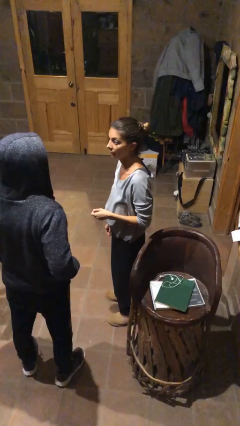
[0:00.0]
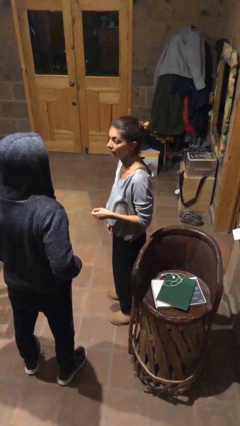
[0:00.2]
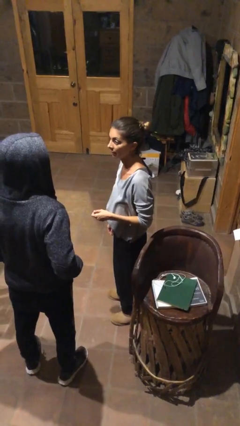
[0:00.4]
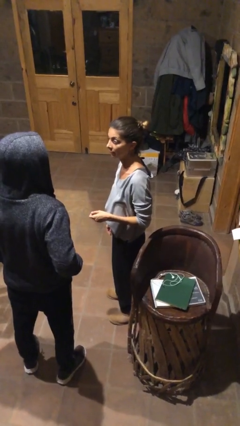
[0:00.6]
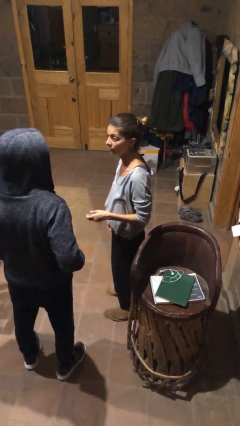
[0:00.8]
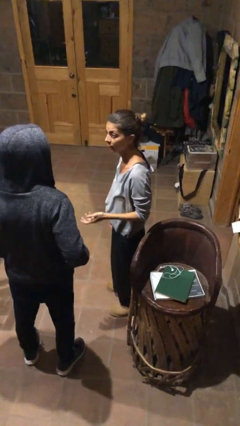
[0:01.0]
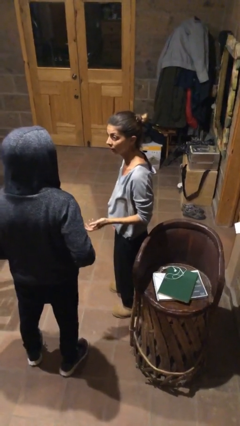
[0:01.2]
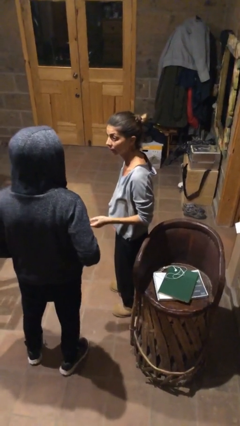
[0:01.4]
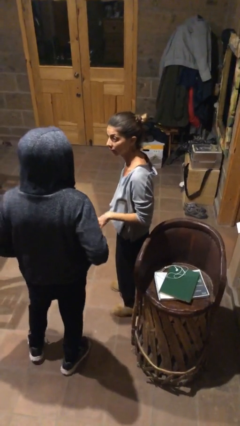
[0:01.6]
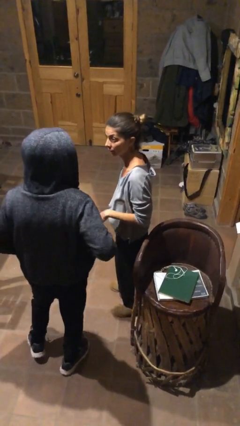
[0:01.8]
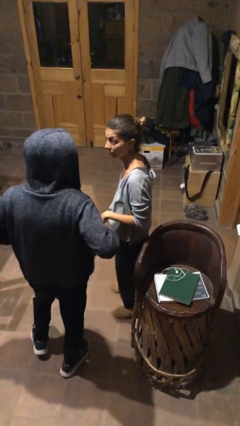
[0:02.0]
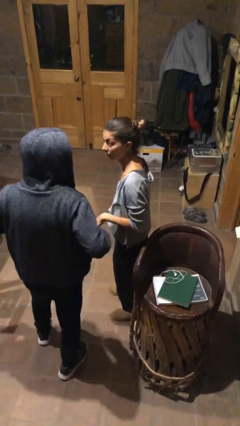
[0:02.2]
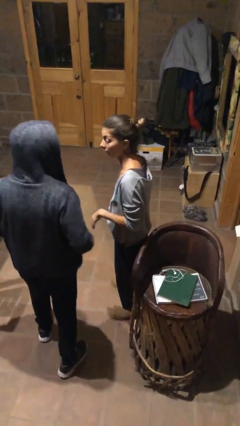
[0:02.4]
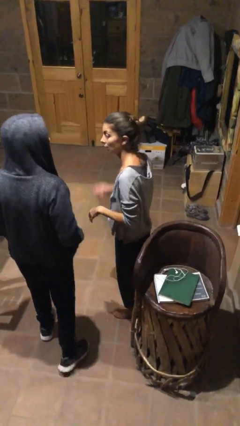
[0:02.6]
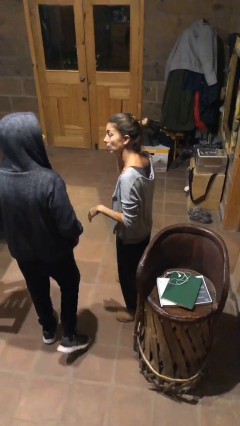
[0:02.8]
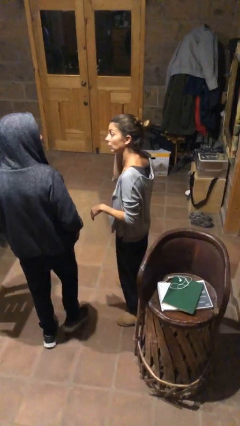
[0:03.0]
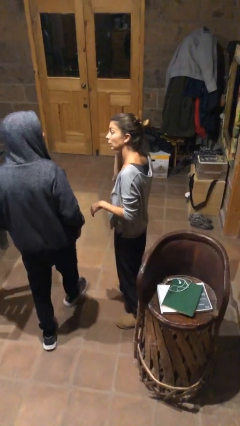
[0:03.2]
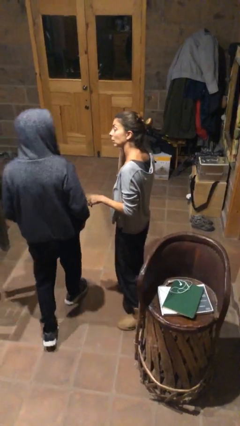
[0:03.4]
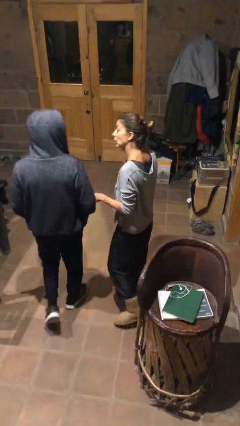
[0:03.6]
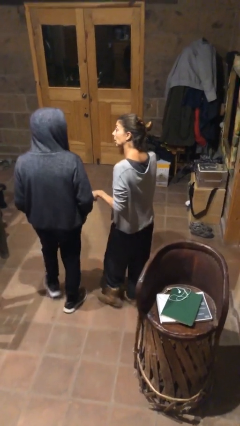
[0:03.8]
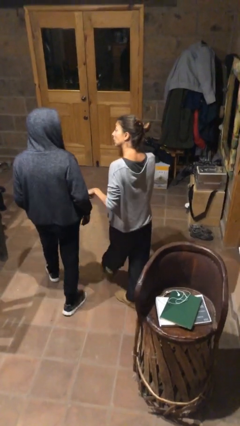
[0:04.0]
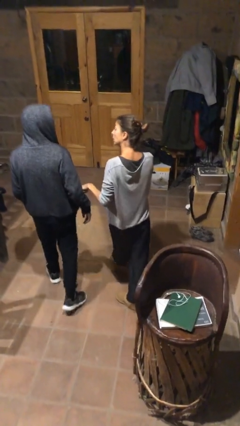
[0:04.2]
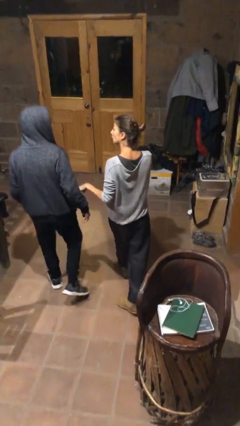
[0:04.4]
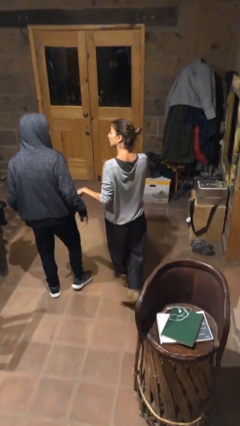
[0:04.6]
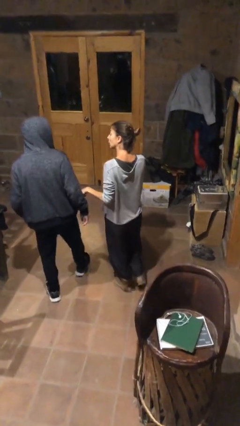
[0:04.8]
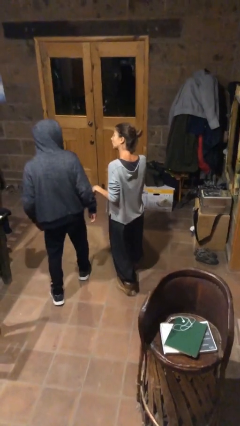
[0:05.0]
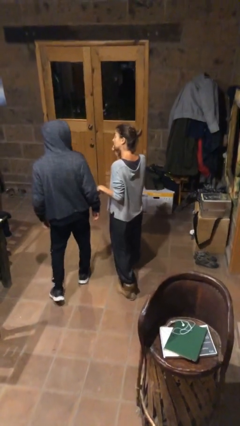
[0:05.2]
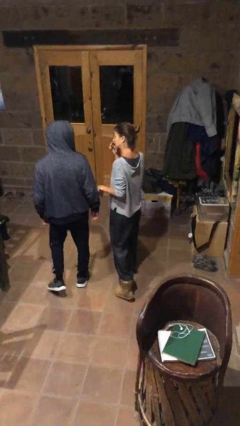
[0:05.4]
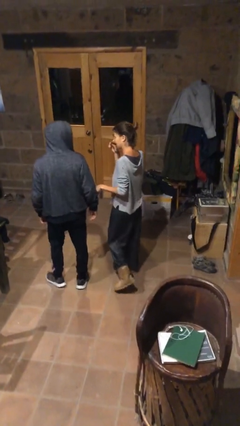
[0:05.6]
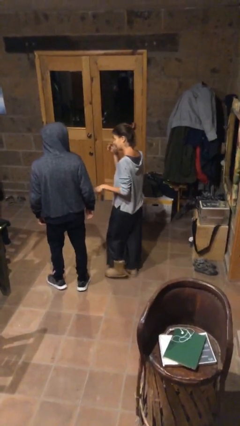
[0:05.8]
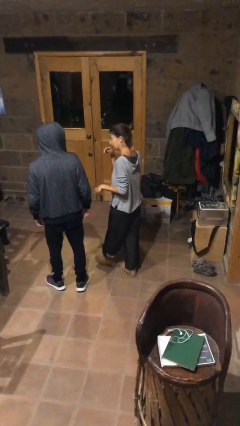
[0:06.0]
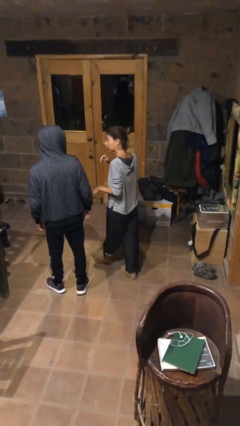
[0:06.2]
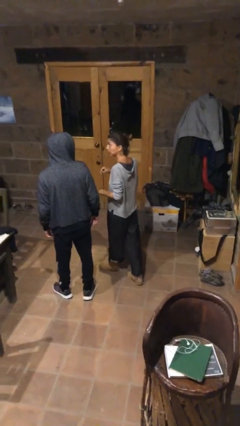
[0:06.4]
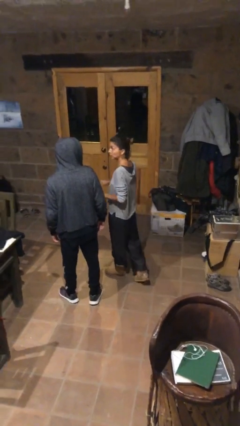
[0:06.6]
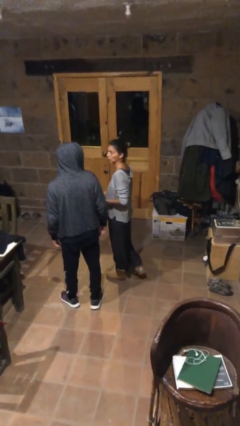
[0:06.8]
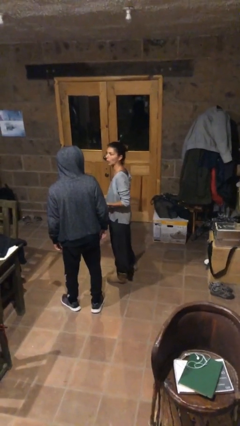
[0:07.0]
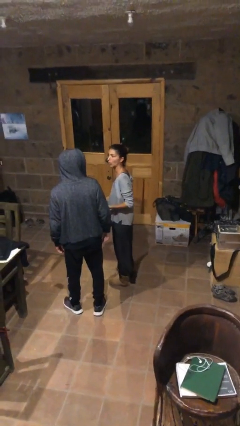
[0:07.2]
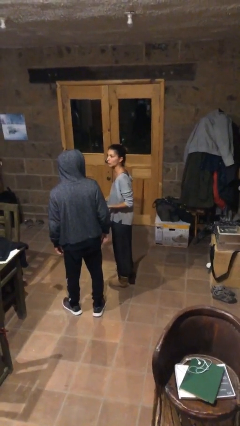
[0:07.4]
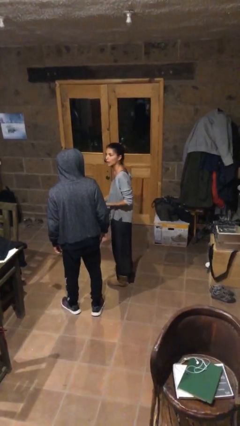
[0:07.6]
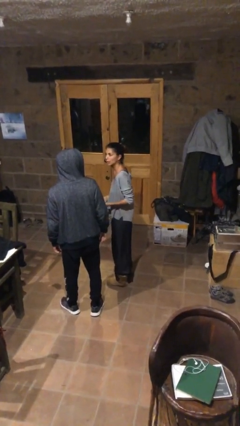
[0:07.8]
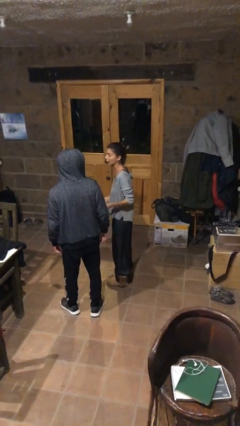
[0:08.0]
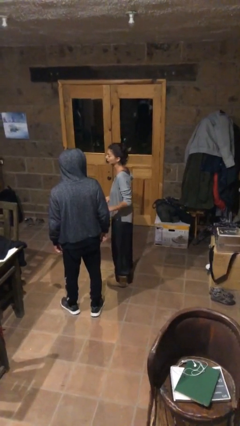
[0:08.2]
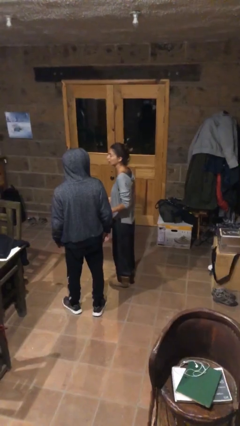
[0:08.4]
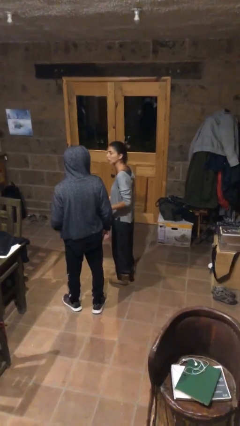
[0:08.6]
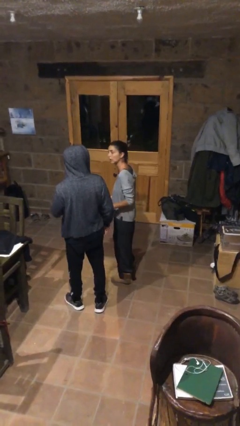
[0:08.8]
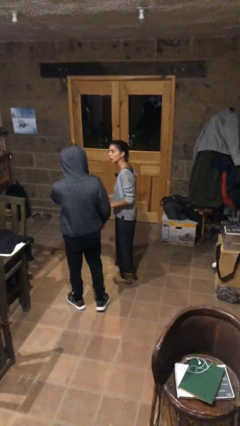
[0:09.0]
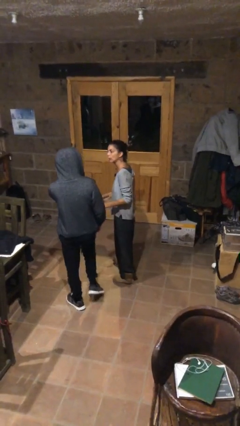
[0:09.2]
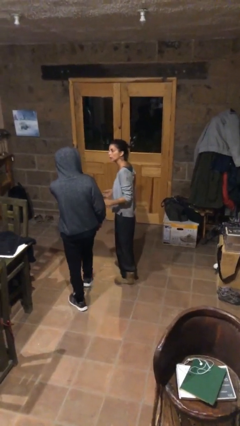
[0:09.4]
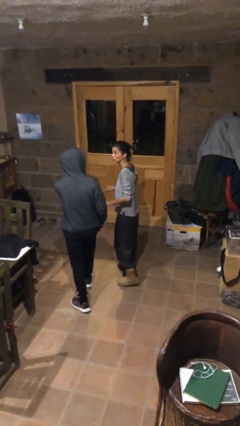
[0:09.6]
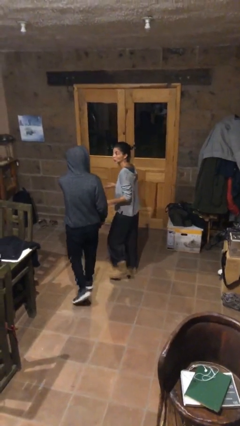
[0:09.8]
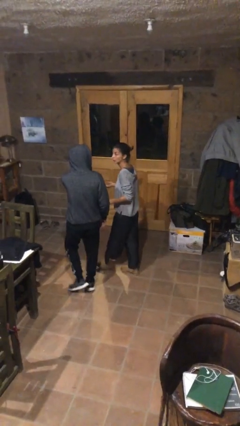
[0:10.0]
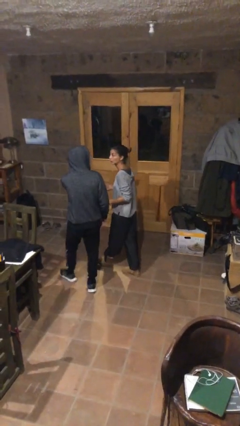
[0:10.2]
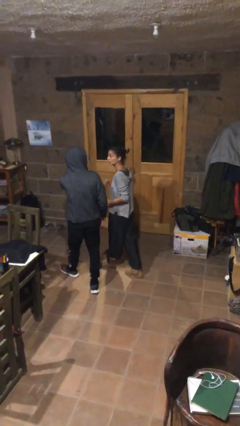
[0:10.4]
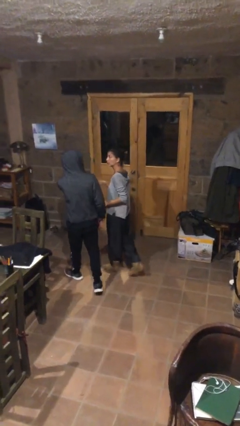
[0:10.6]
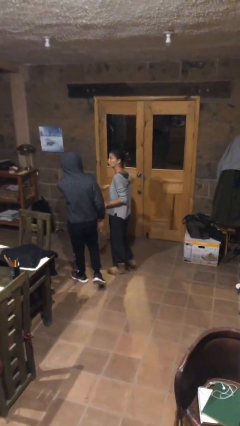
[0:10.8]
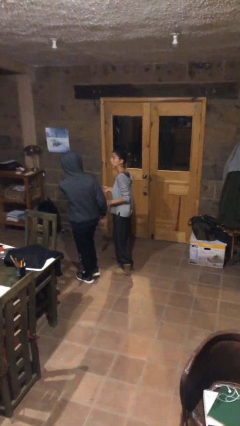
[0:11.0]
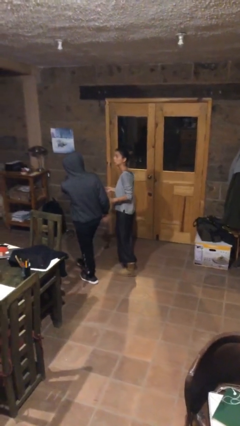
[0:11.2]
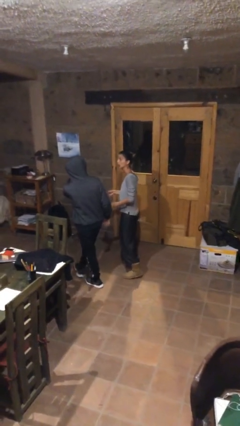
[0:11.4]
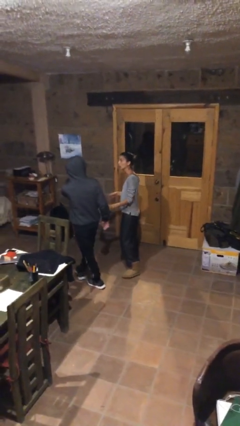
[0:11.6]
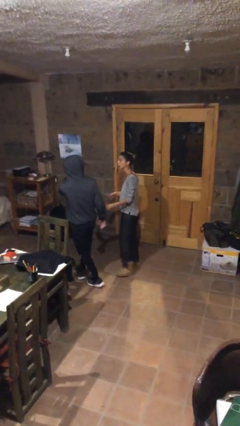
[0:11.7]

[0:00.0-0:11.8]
person talks to person

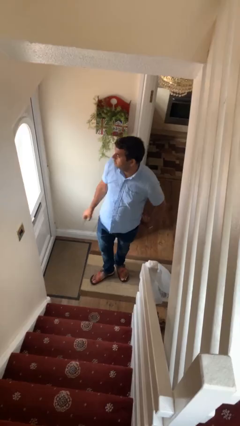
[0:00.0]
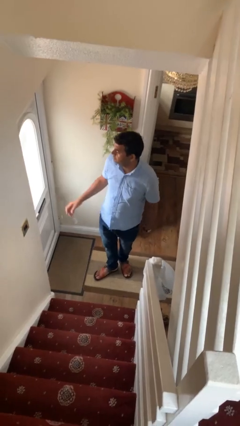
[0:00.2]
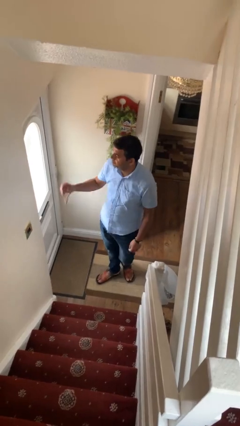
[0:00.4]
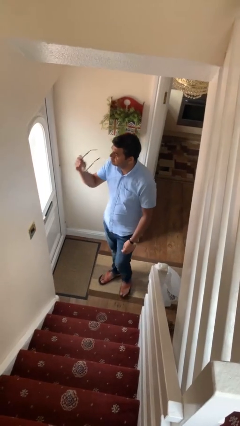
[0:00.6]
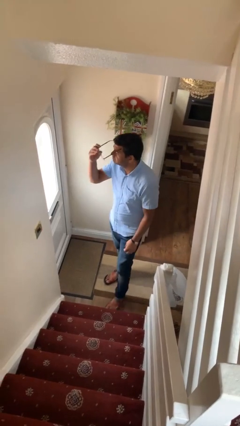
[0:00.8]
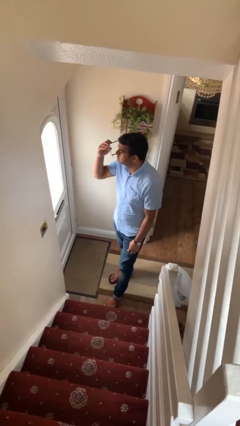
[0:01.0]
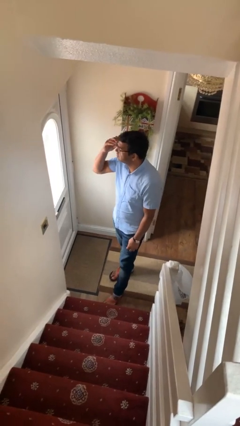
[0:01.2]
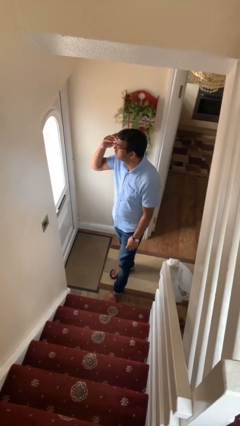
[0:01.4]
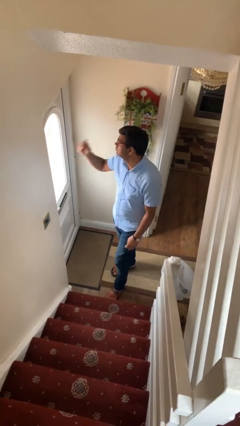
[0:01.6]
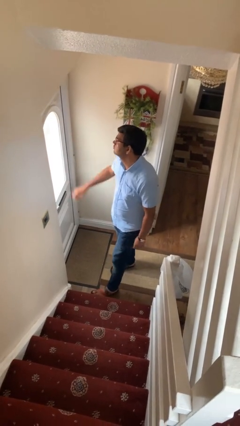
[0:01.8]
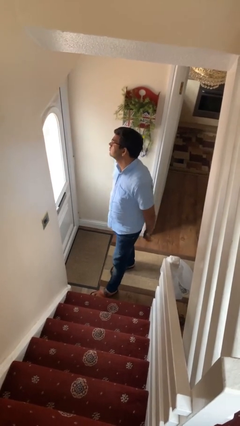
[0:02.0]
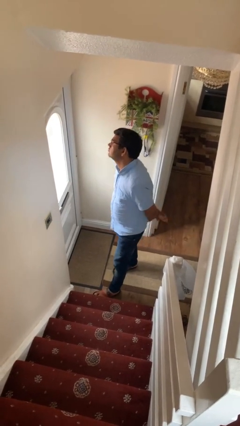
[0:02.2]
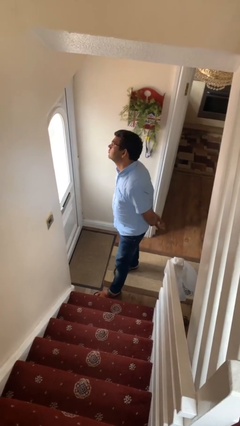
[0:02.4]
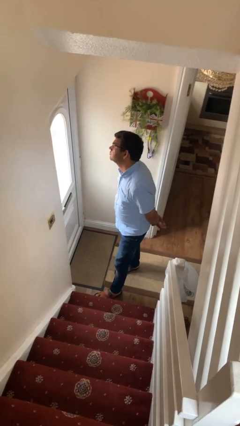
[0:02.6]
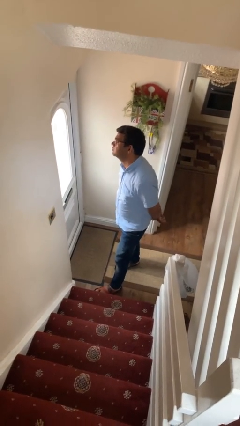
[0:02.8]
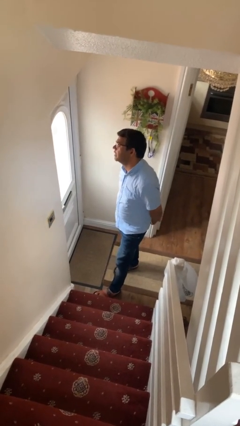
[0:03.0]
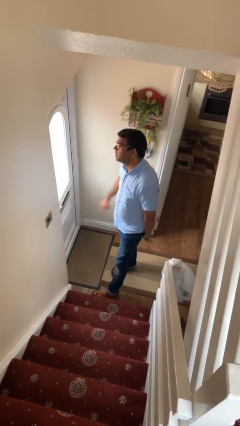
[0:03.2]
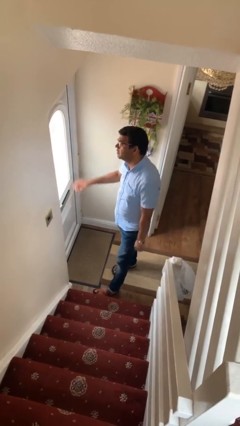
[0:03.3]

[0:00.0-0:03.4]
person puts on glasses

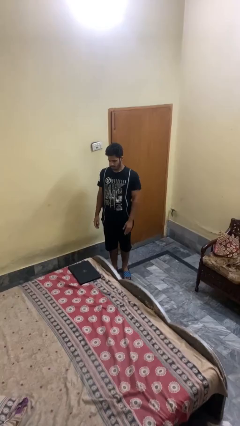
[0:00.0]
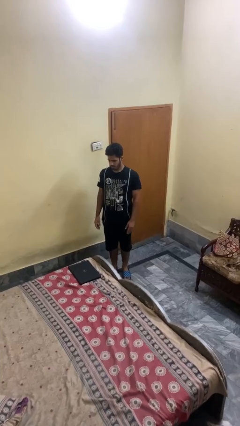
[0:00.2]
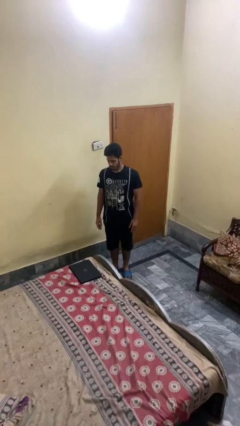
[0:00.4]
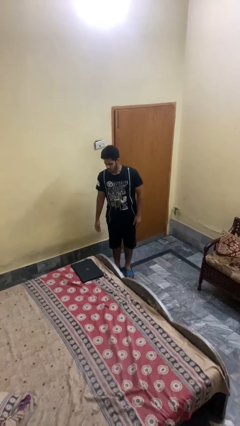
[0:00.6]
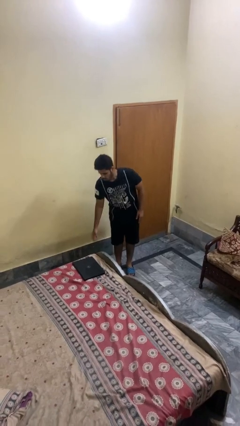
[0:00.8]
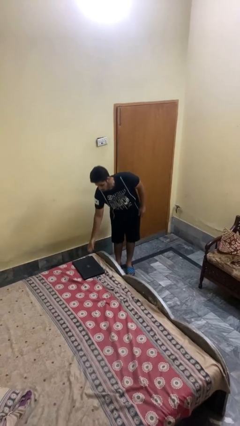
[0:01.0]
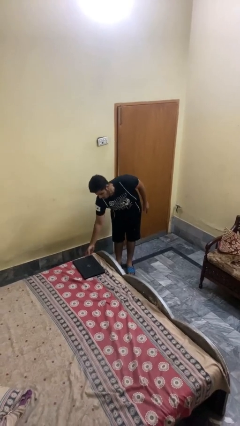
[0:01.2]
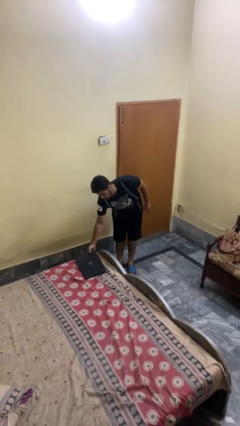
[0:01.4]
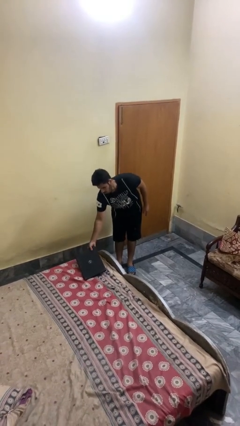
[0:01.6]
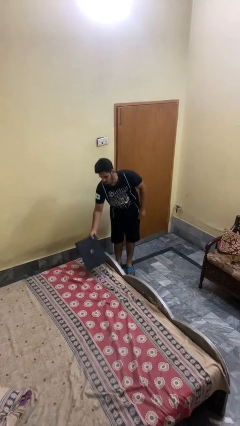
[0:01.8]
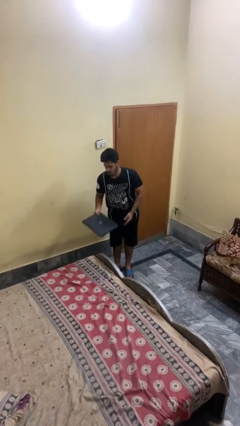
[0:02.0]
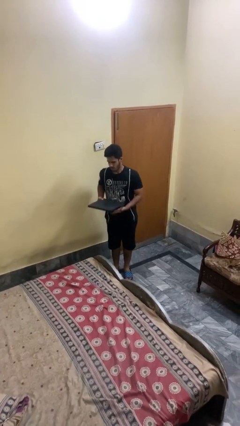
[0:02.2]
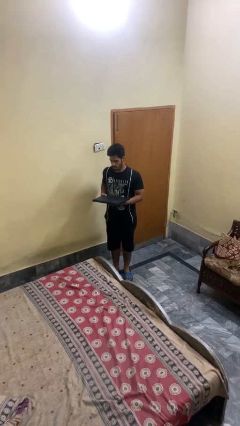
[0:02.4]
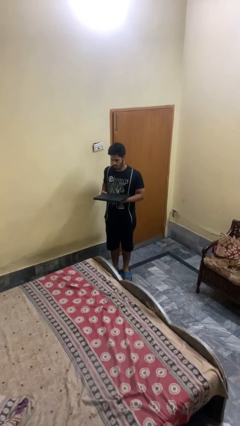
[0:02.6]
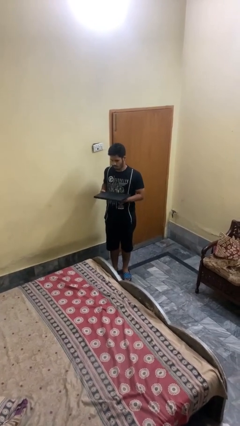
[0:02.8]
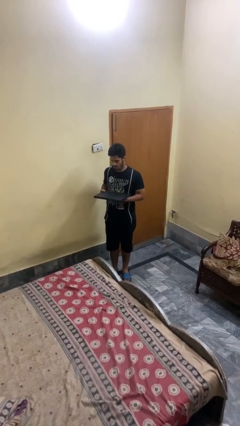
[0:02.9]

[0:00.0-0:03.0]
person picks up object from bed

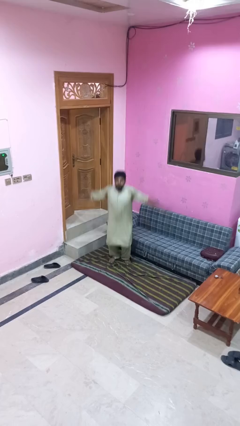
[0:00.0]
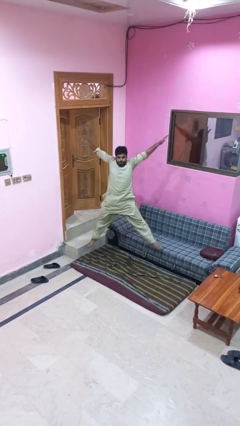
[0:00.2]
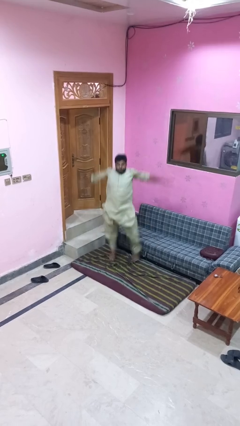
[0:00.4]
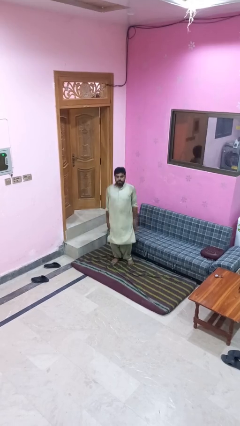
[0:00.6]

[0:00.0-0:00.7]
person exercises with jumping jacks
